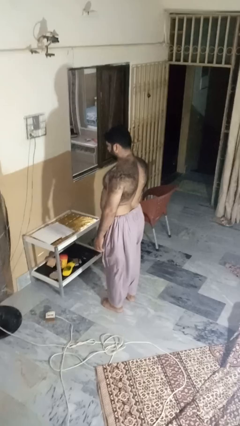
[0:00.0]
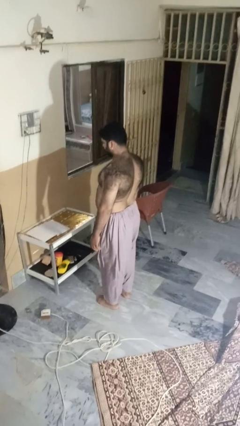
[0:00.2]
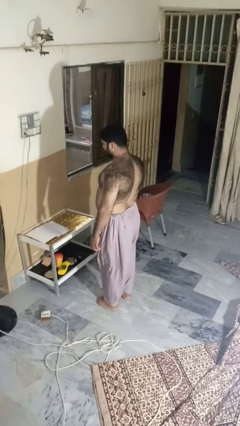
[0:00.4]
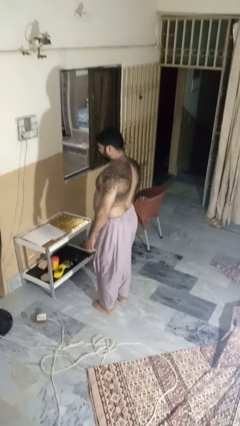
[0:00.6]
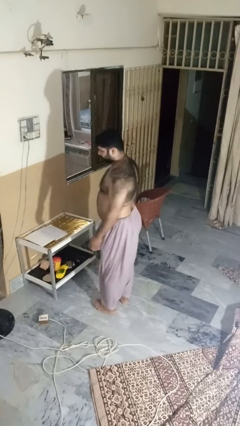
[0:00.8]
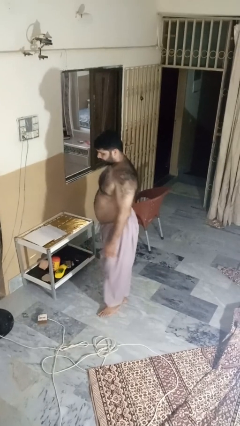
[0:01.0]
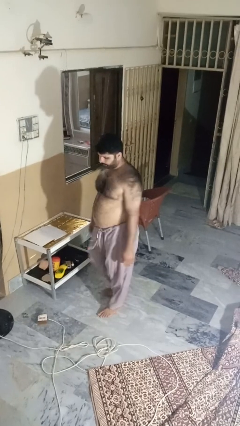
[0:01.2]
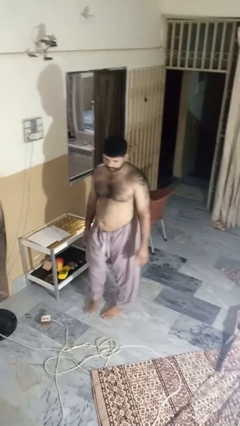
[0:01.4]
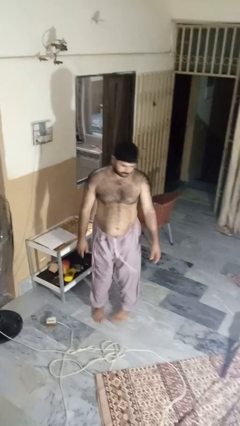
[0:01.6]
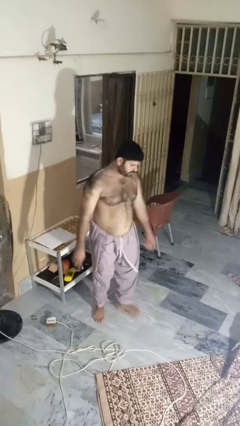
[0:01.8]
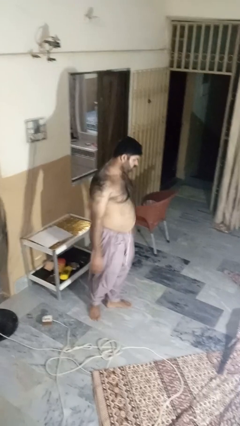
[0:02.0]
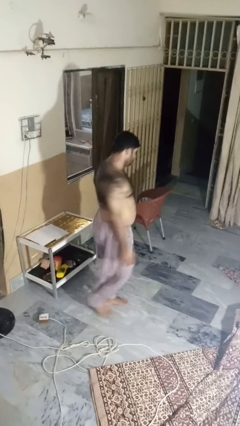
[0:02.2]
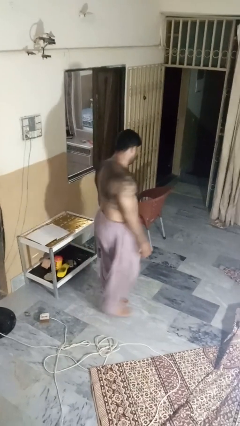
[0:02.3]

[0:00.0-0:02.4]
person twirls

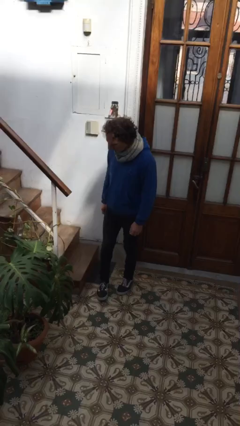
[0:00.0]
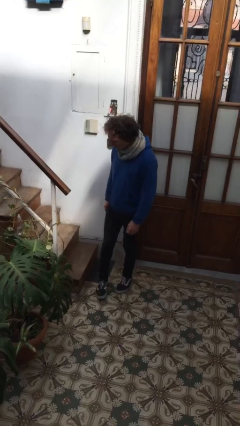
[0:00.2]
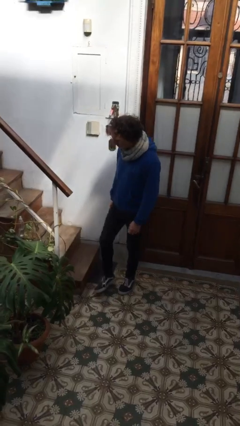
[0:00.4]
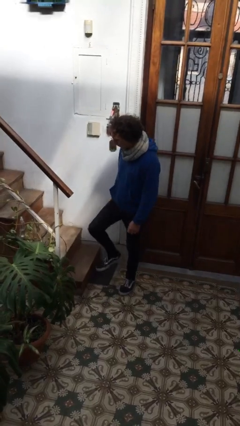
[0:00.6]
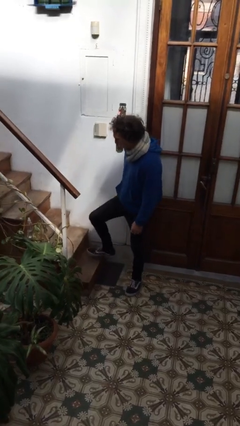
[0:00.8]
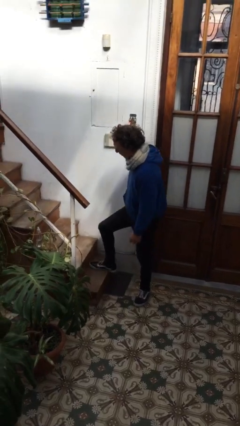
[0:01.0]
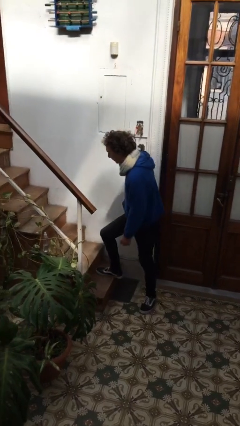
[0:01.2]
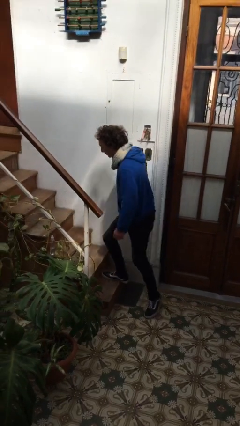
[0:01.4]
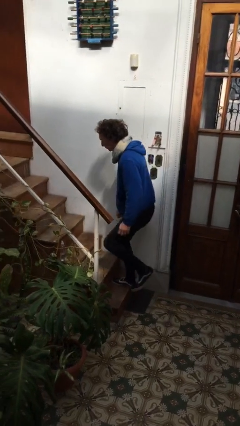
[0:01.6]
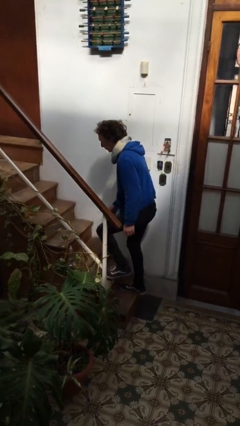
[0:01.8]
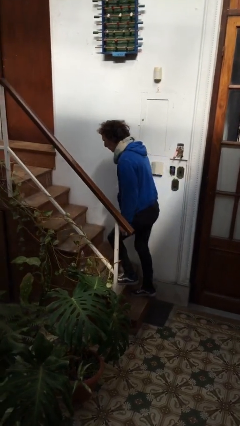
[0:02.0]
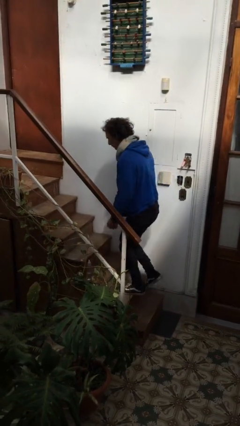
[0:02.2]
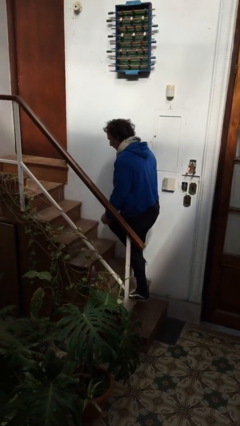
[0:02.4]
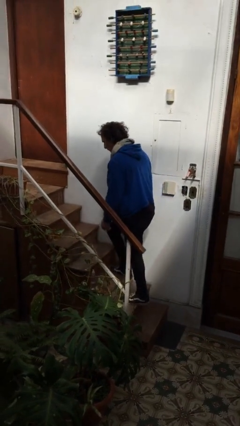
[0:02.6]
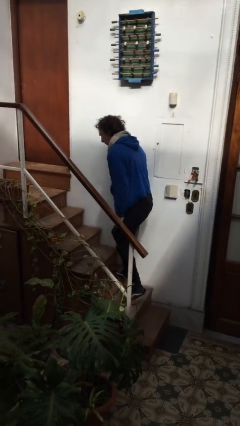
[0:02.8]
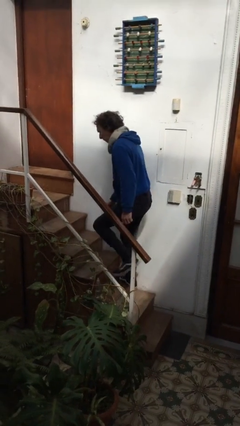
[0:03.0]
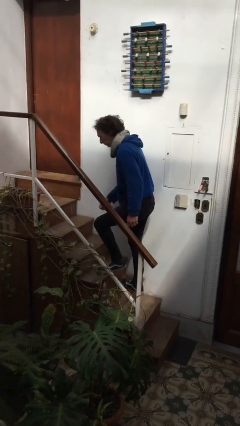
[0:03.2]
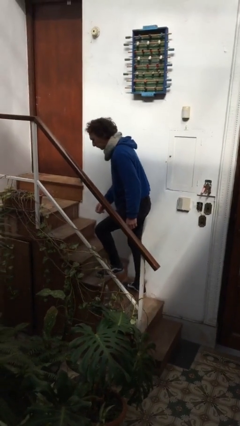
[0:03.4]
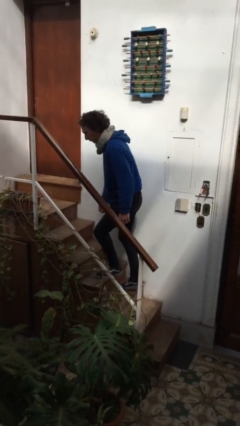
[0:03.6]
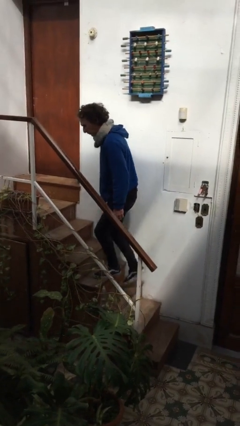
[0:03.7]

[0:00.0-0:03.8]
person climbs up stairs

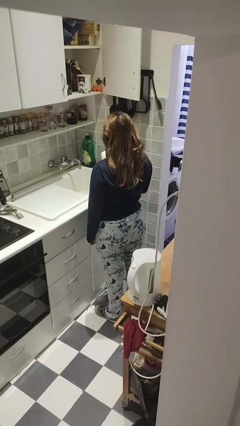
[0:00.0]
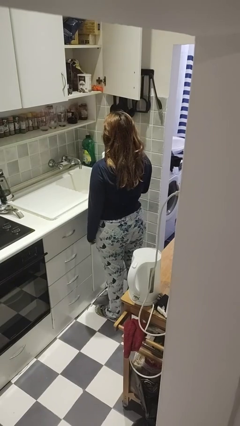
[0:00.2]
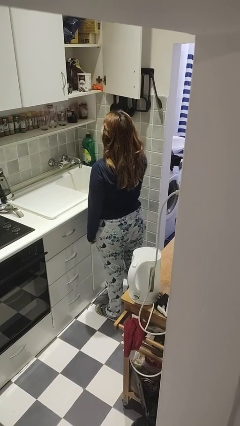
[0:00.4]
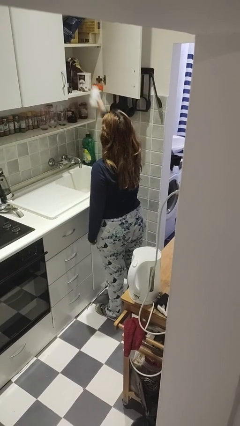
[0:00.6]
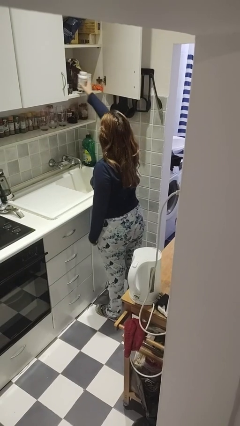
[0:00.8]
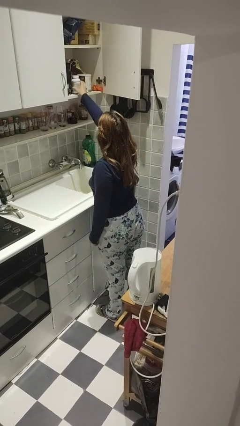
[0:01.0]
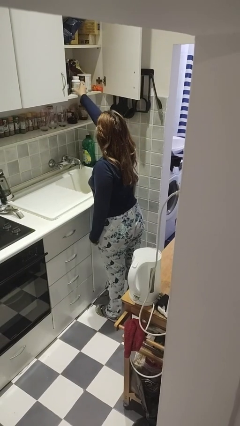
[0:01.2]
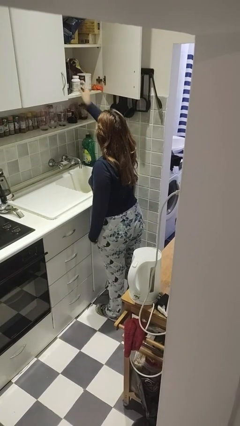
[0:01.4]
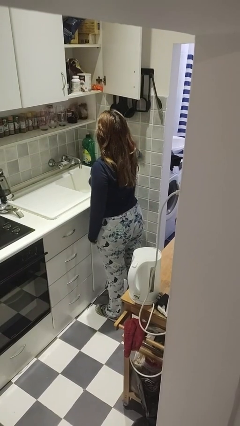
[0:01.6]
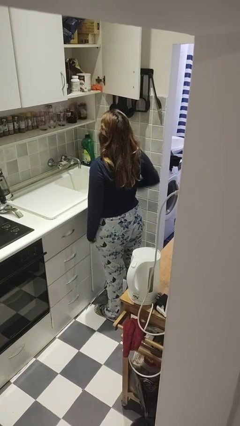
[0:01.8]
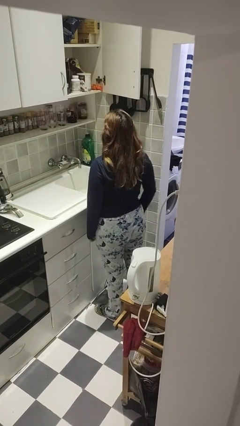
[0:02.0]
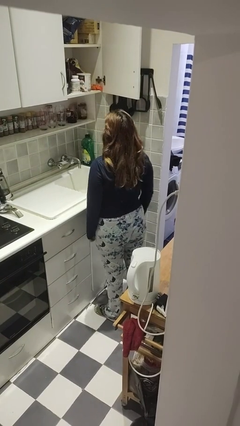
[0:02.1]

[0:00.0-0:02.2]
person puts object in cabinet

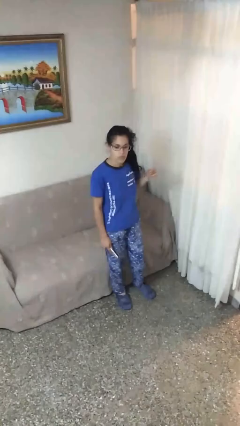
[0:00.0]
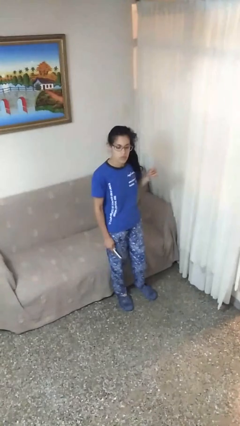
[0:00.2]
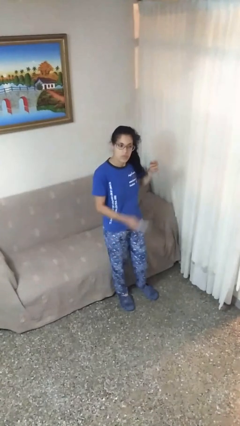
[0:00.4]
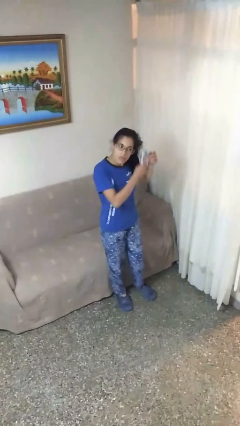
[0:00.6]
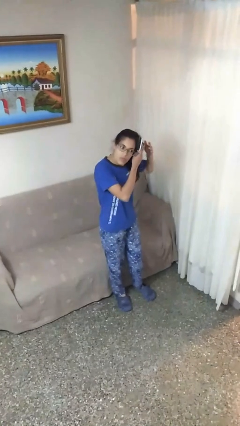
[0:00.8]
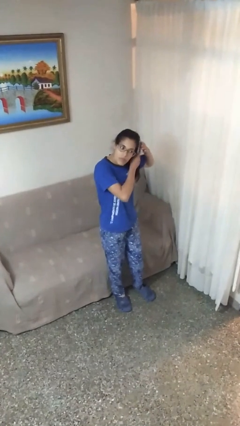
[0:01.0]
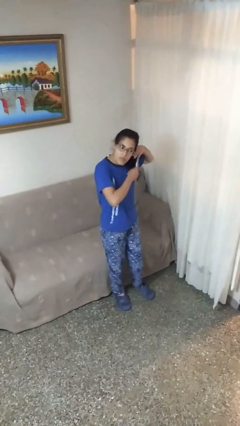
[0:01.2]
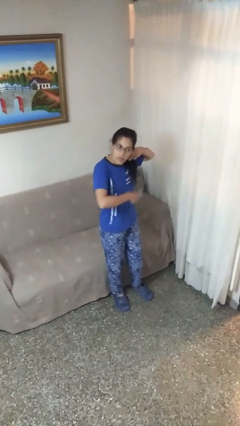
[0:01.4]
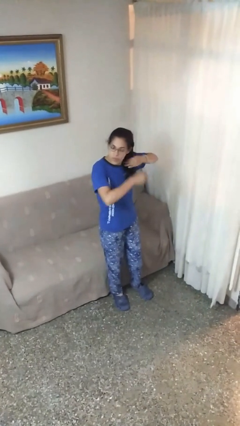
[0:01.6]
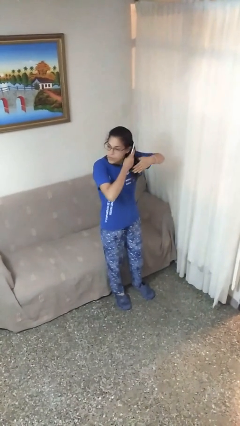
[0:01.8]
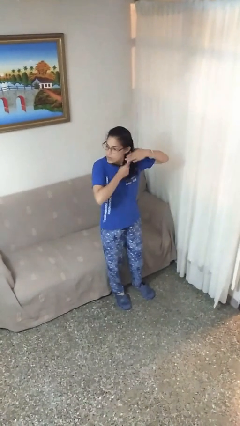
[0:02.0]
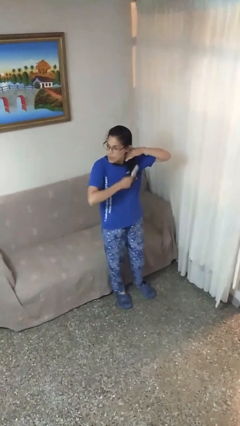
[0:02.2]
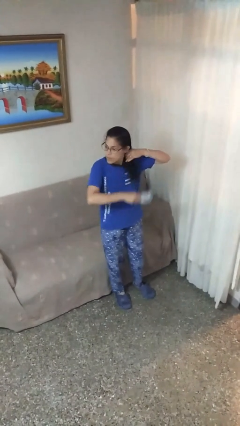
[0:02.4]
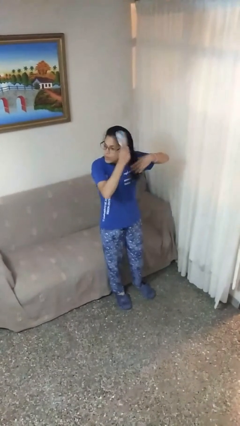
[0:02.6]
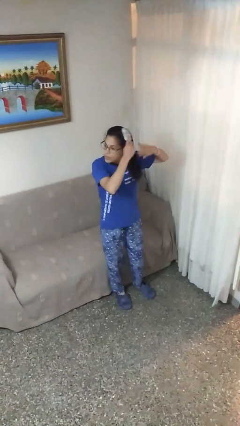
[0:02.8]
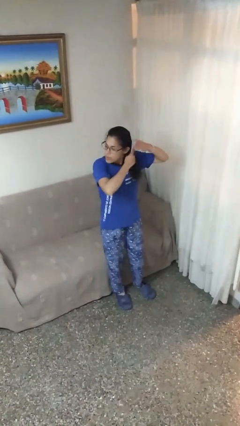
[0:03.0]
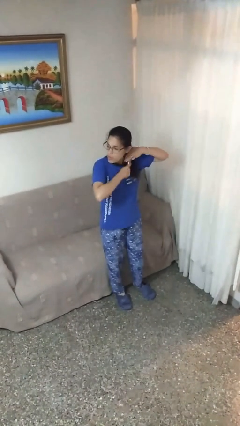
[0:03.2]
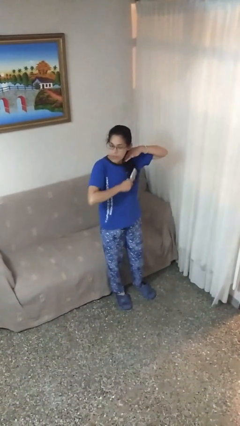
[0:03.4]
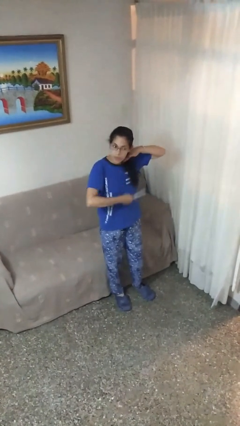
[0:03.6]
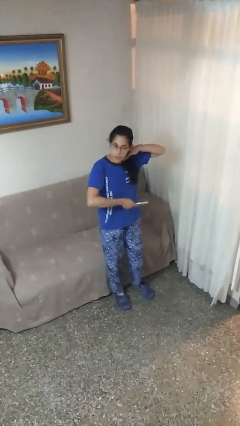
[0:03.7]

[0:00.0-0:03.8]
person brushes hair

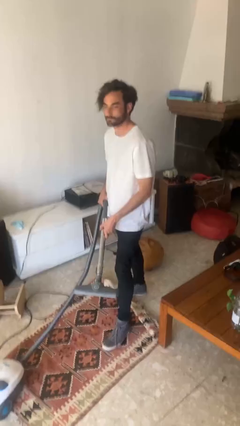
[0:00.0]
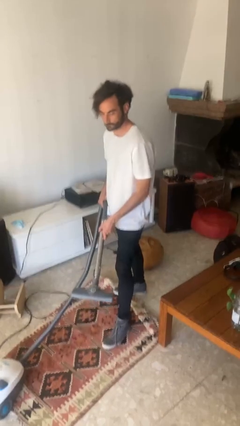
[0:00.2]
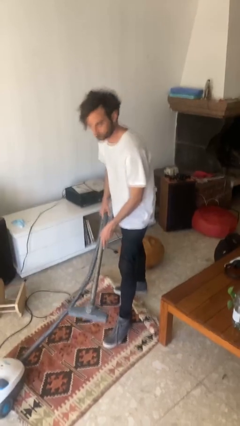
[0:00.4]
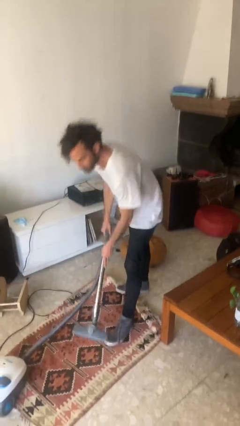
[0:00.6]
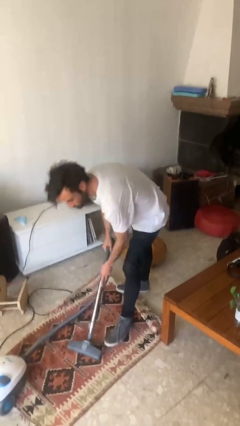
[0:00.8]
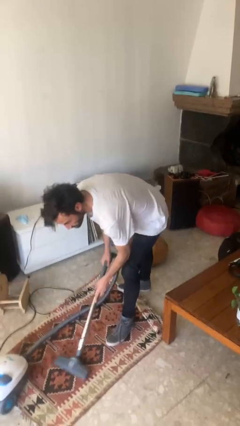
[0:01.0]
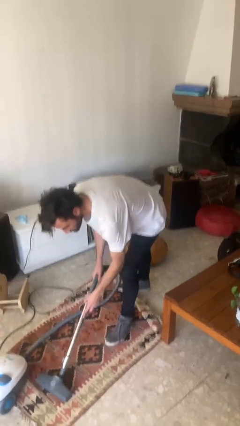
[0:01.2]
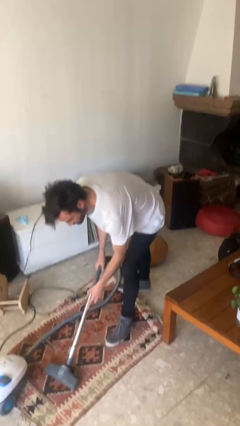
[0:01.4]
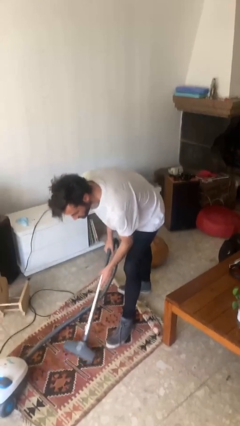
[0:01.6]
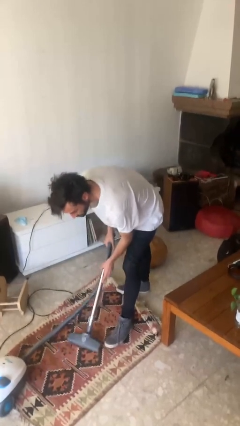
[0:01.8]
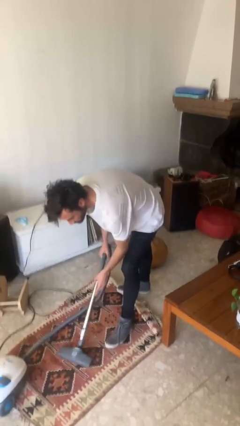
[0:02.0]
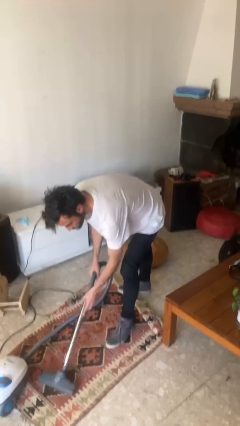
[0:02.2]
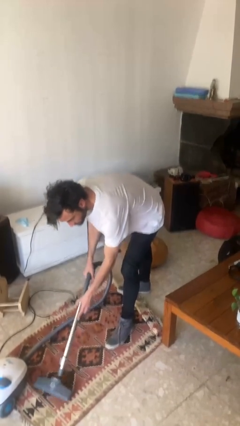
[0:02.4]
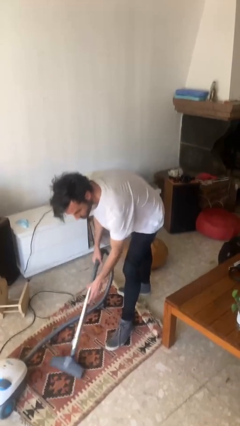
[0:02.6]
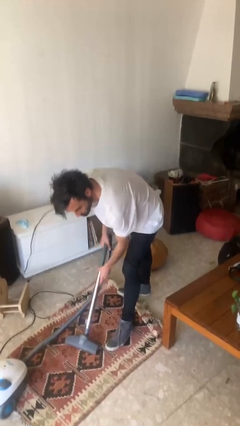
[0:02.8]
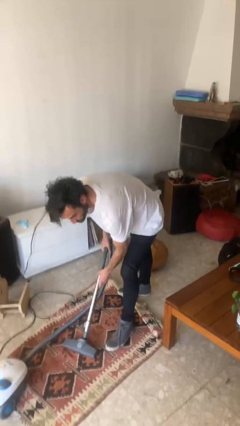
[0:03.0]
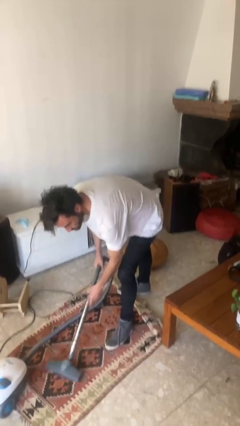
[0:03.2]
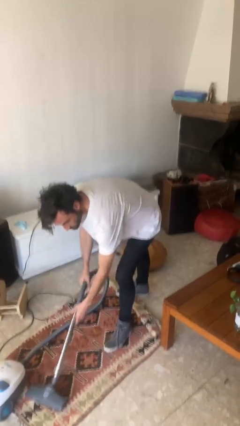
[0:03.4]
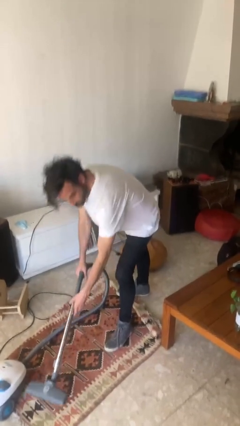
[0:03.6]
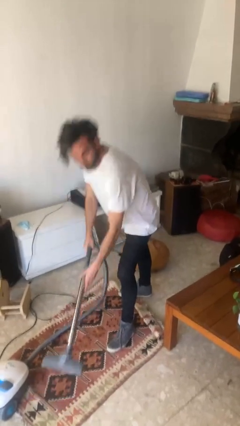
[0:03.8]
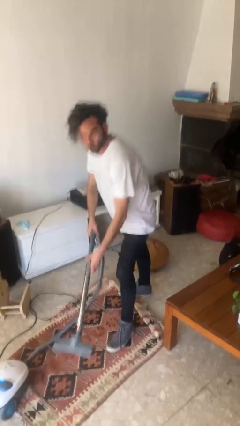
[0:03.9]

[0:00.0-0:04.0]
person vacuums carpet

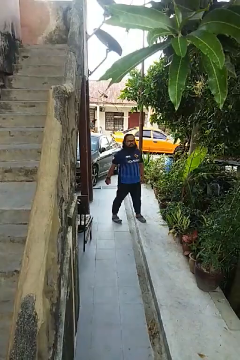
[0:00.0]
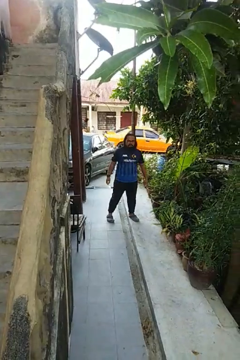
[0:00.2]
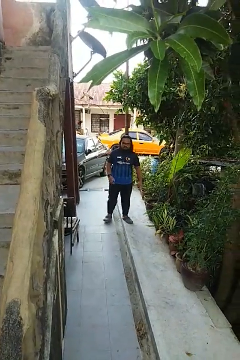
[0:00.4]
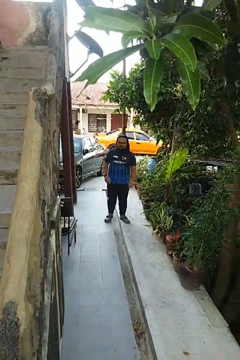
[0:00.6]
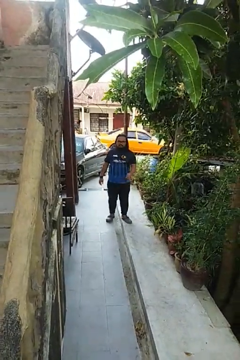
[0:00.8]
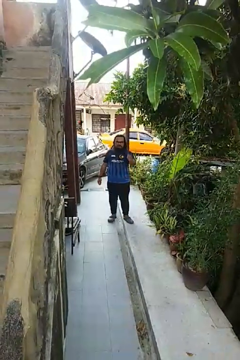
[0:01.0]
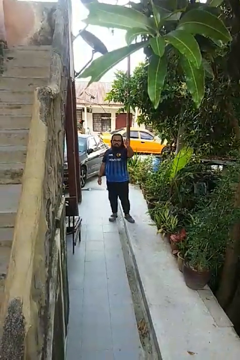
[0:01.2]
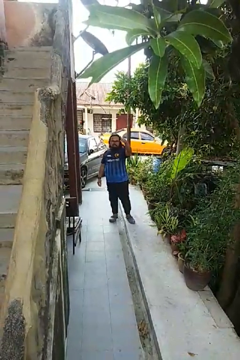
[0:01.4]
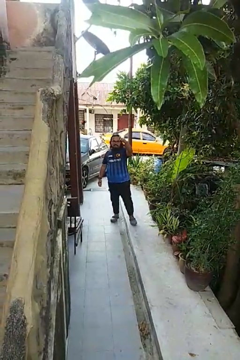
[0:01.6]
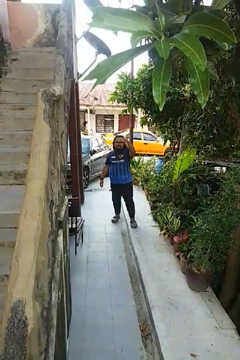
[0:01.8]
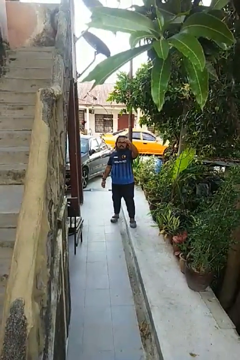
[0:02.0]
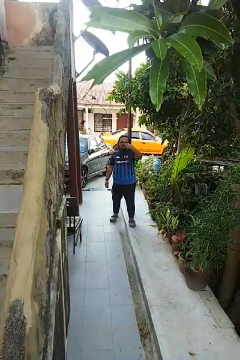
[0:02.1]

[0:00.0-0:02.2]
person gestures come here
